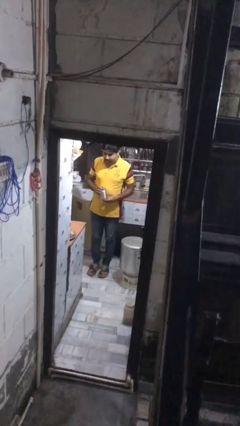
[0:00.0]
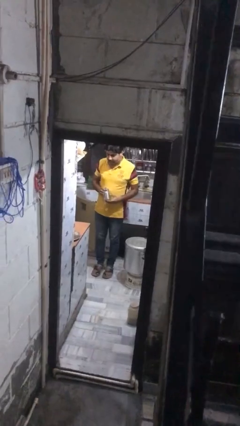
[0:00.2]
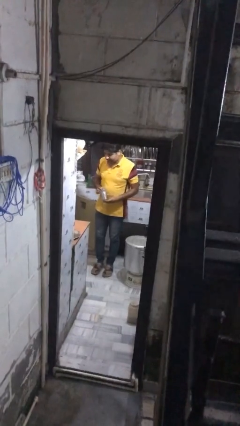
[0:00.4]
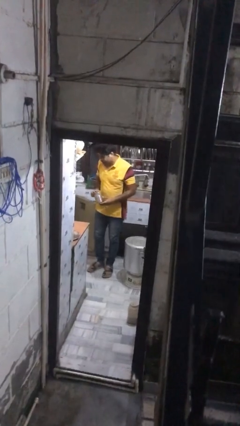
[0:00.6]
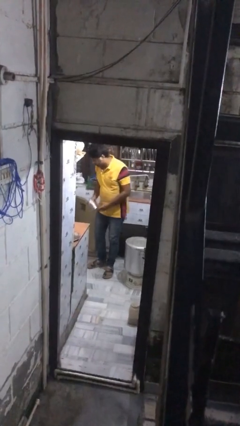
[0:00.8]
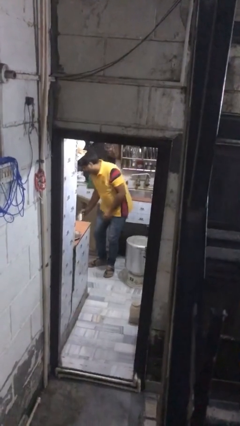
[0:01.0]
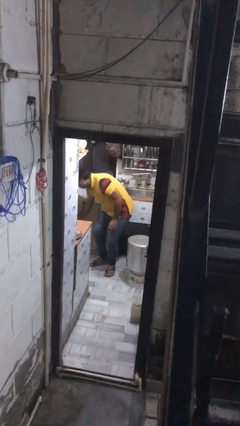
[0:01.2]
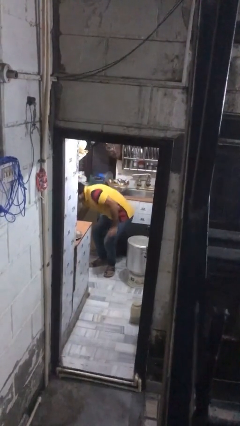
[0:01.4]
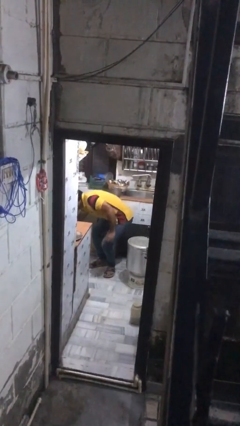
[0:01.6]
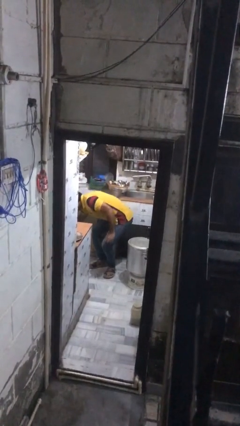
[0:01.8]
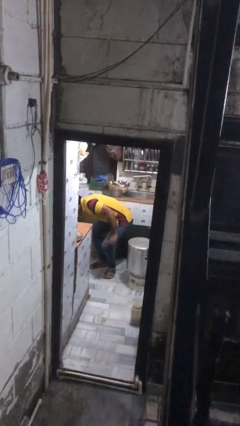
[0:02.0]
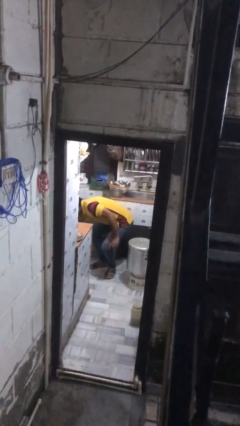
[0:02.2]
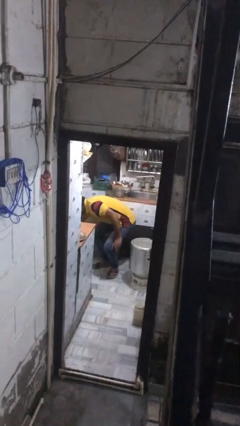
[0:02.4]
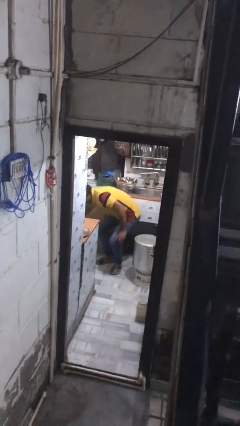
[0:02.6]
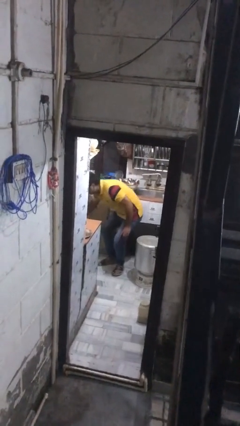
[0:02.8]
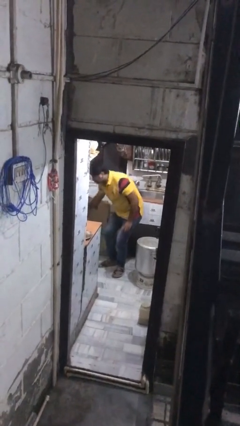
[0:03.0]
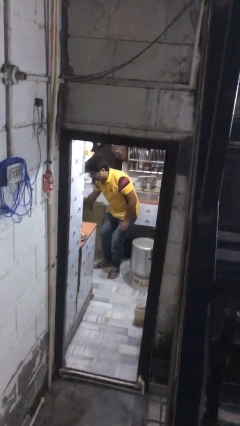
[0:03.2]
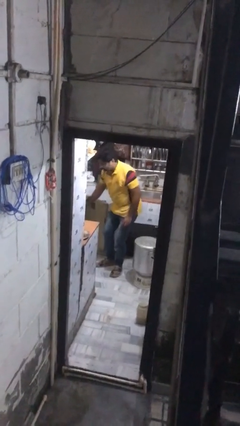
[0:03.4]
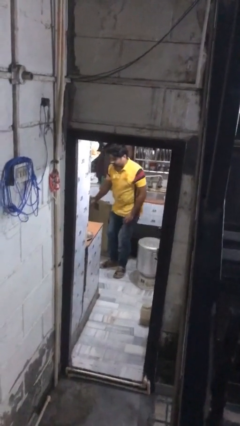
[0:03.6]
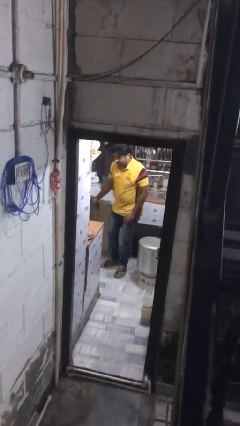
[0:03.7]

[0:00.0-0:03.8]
person puts object into kitchen drawer

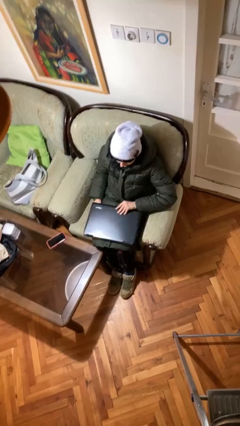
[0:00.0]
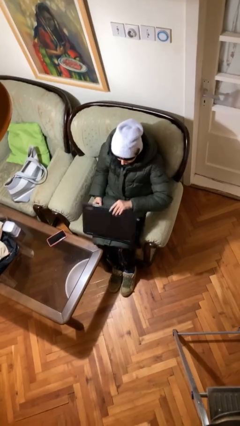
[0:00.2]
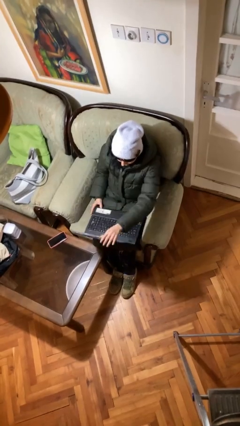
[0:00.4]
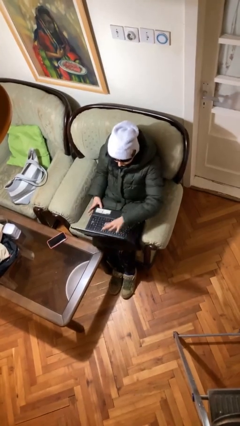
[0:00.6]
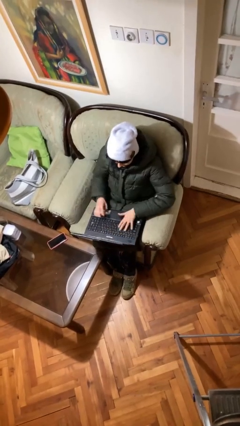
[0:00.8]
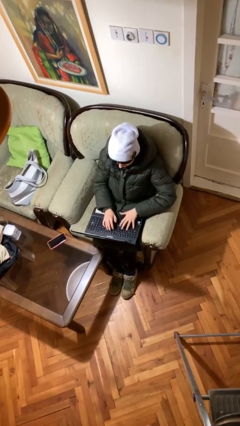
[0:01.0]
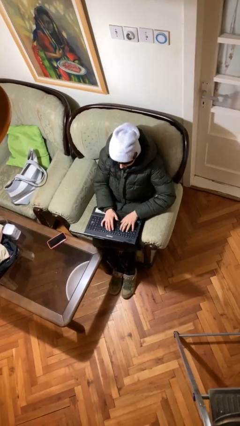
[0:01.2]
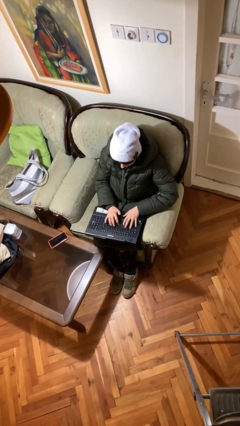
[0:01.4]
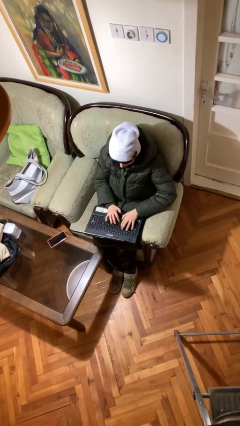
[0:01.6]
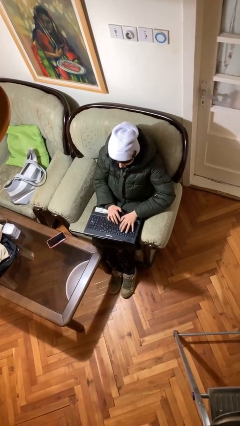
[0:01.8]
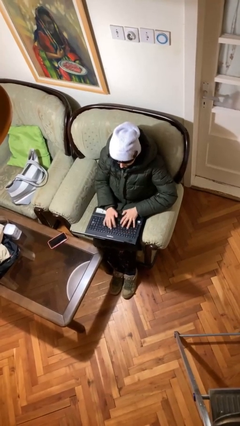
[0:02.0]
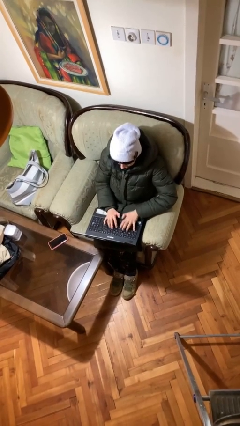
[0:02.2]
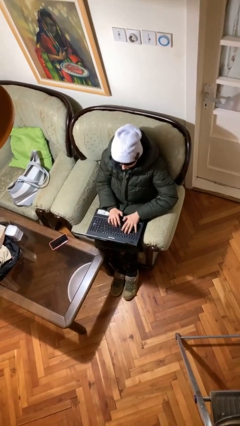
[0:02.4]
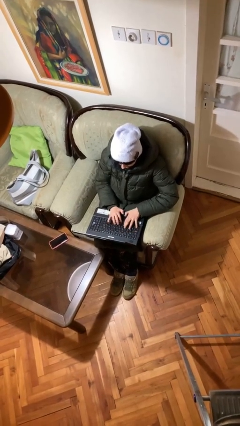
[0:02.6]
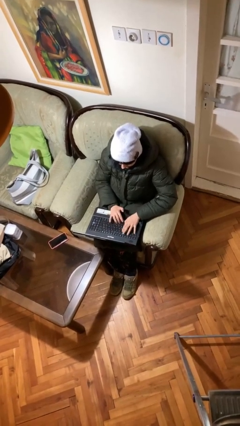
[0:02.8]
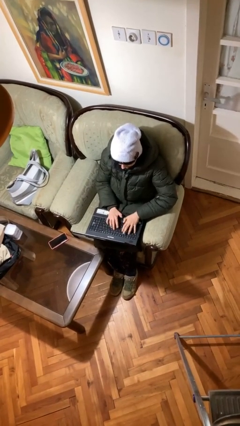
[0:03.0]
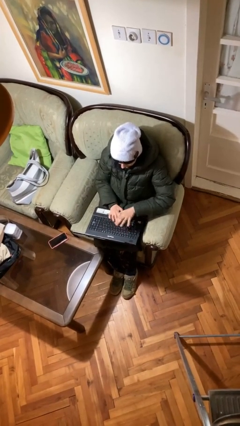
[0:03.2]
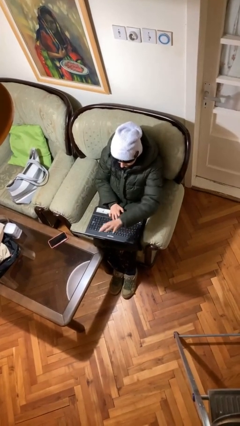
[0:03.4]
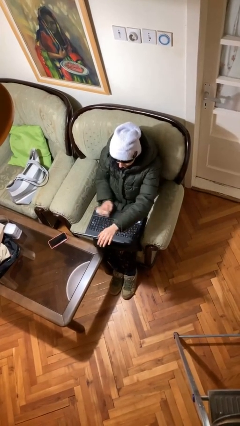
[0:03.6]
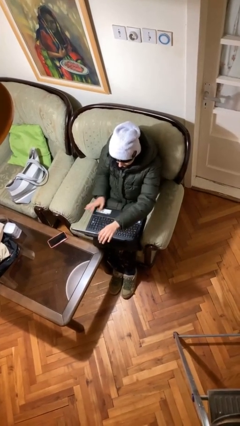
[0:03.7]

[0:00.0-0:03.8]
person interacts with laptop

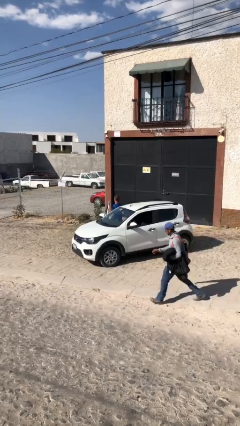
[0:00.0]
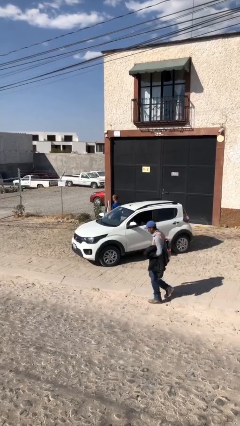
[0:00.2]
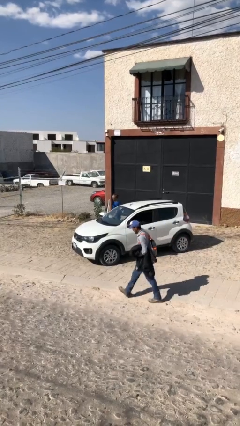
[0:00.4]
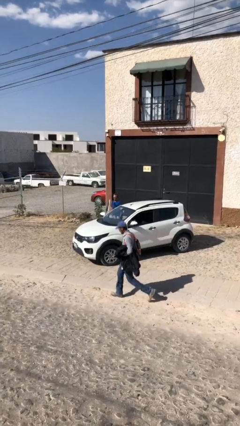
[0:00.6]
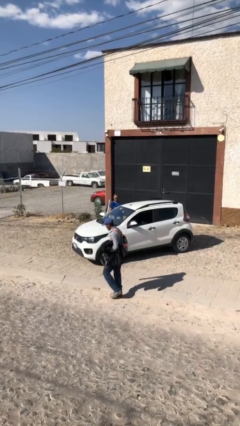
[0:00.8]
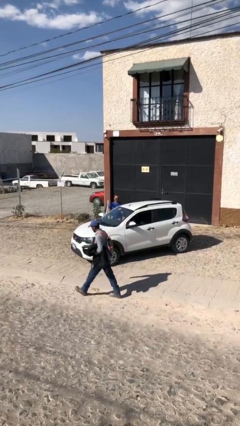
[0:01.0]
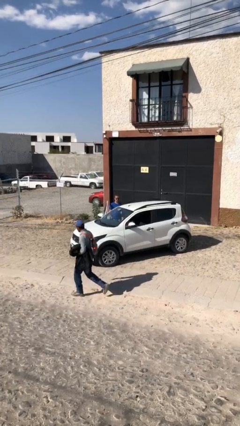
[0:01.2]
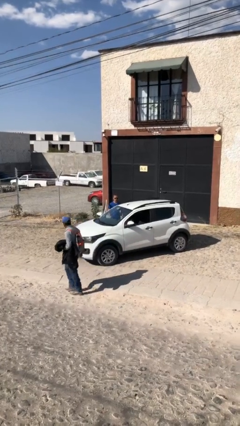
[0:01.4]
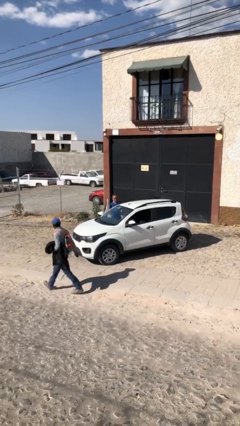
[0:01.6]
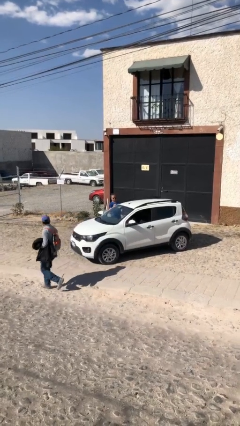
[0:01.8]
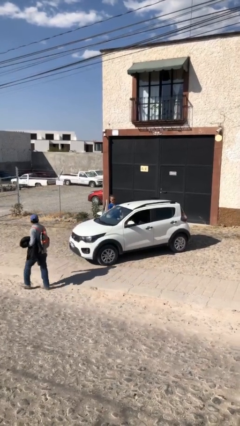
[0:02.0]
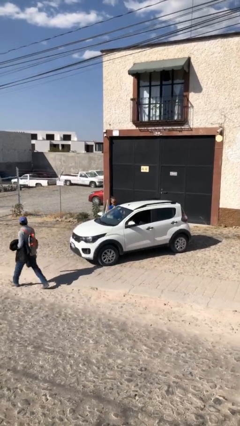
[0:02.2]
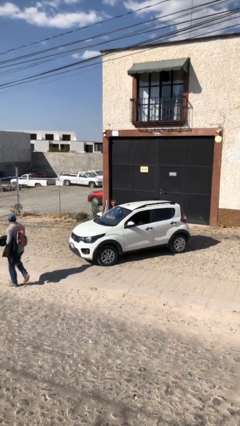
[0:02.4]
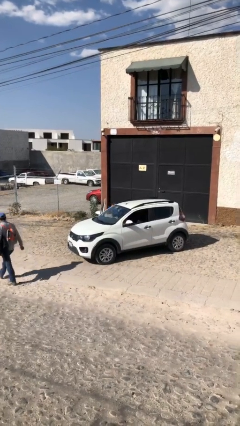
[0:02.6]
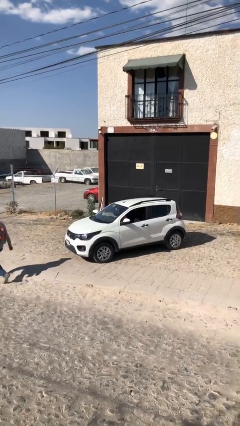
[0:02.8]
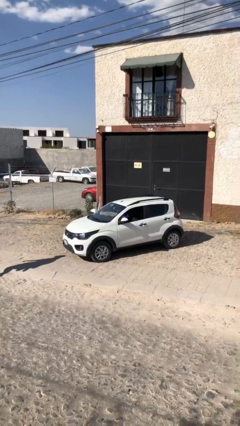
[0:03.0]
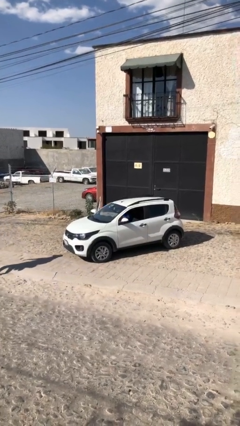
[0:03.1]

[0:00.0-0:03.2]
person enters car

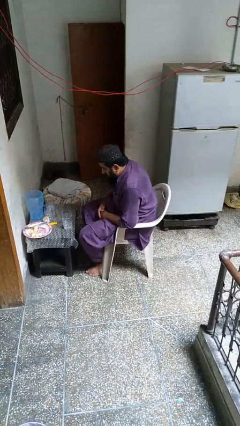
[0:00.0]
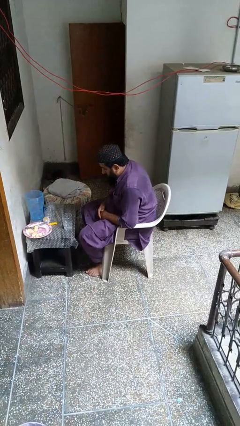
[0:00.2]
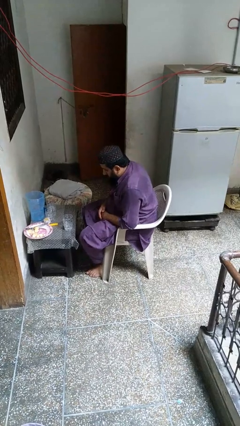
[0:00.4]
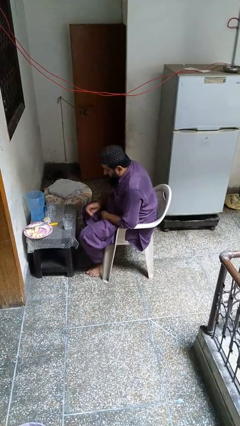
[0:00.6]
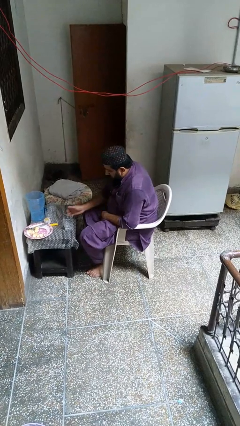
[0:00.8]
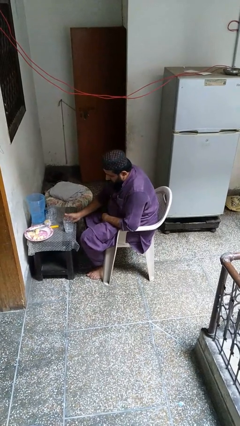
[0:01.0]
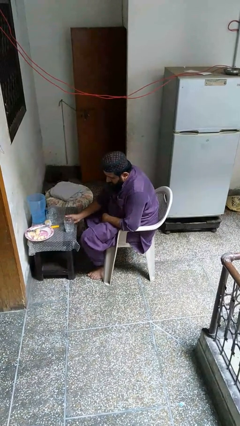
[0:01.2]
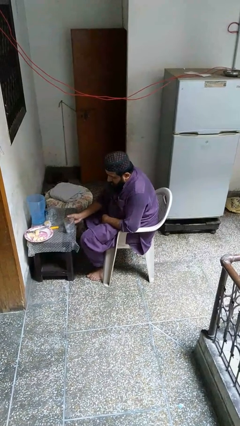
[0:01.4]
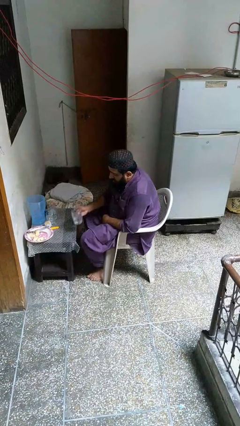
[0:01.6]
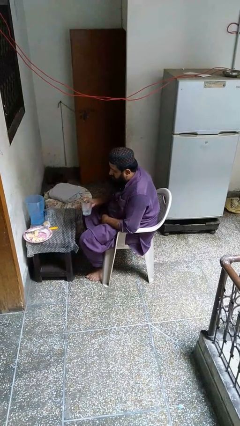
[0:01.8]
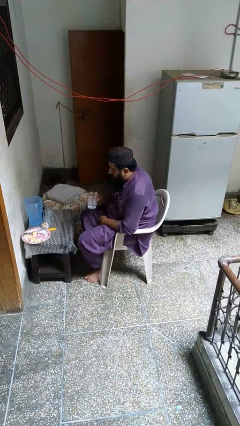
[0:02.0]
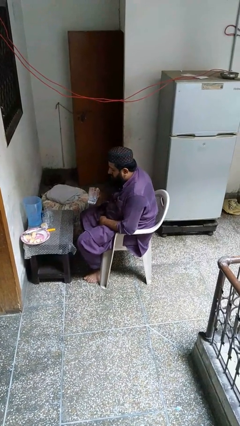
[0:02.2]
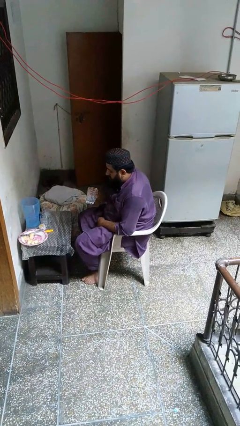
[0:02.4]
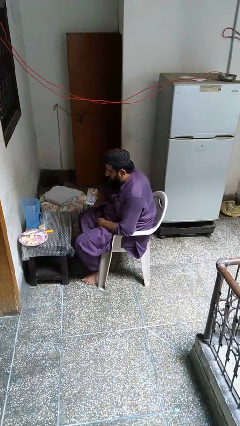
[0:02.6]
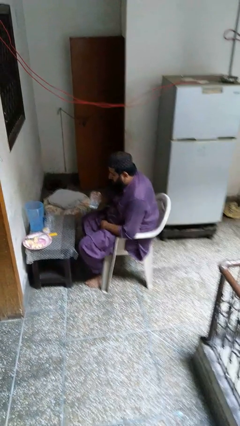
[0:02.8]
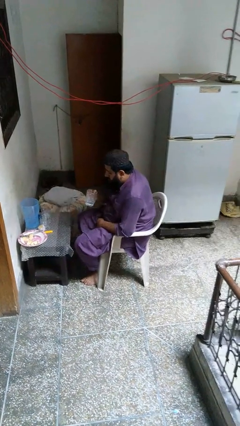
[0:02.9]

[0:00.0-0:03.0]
person picks up object from table

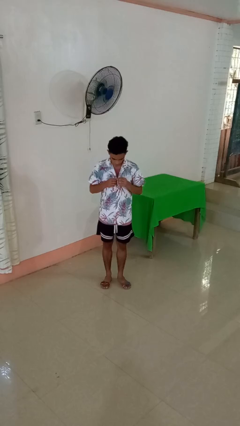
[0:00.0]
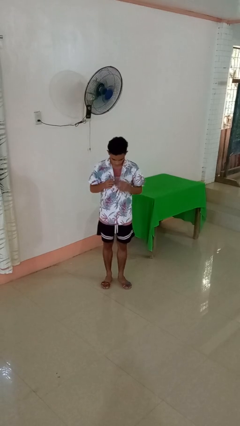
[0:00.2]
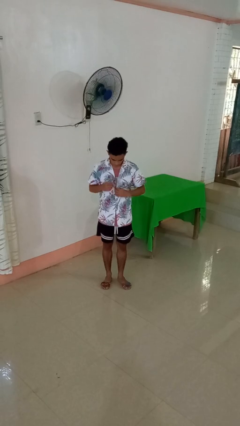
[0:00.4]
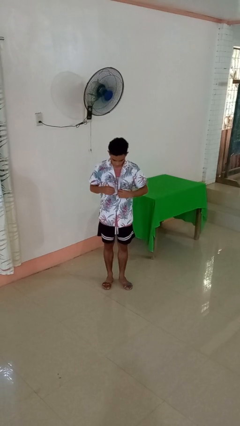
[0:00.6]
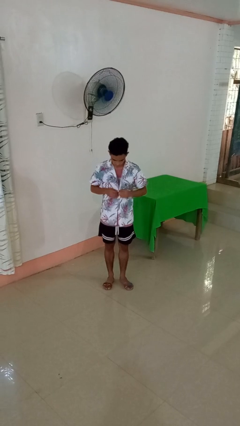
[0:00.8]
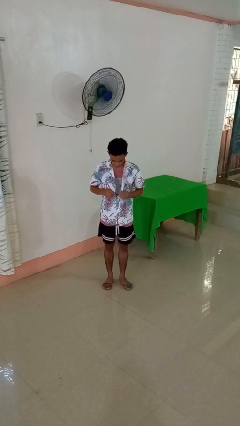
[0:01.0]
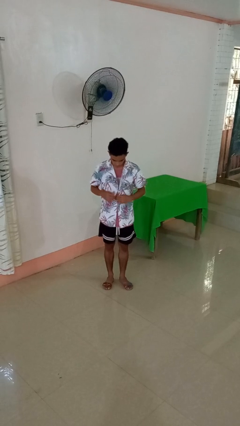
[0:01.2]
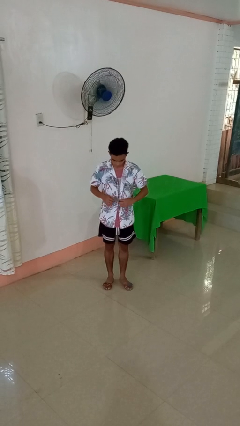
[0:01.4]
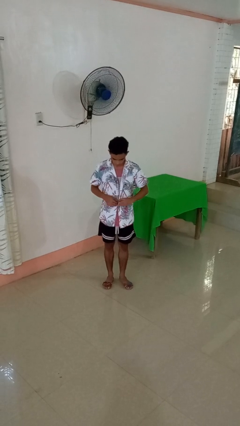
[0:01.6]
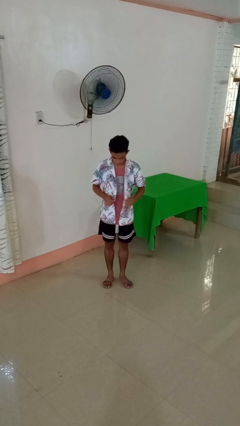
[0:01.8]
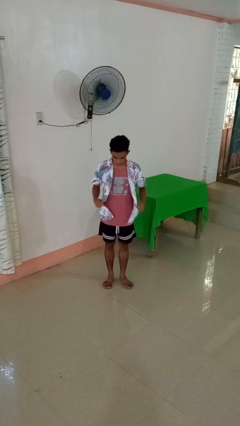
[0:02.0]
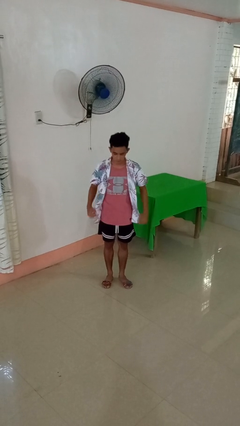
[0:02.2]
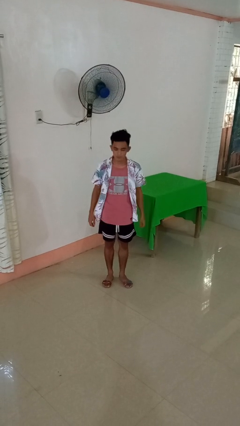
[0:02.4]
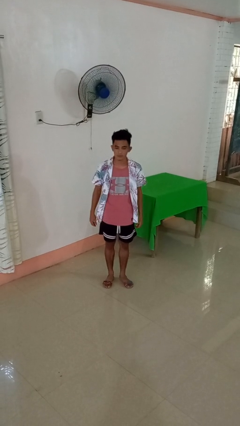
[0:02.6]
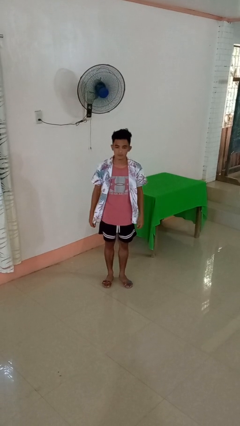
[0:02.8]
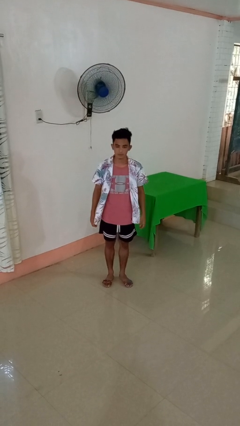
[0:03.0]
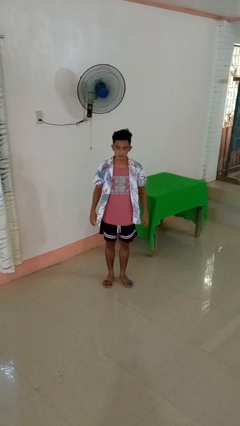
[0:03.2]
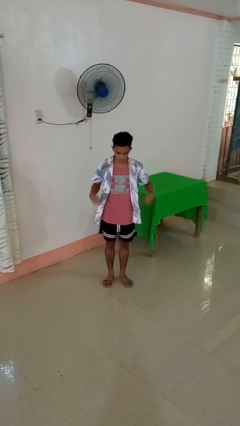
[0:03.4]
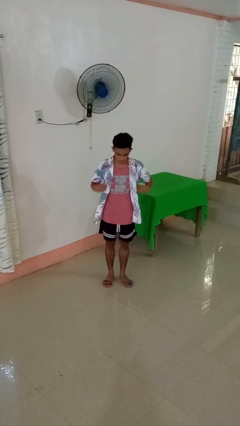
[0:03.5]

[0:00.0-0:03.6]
person unbuttons shirt
